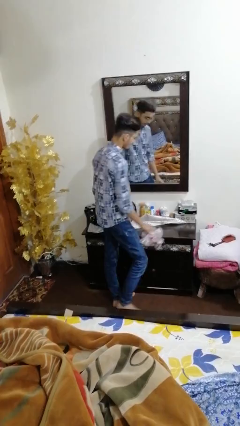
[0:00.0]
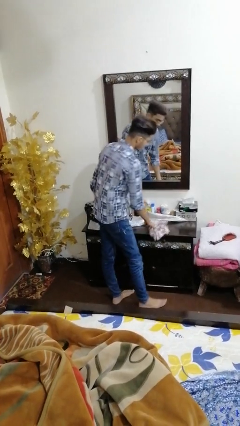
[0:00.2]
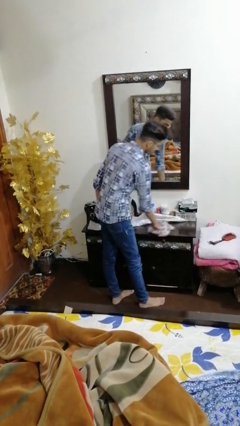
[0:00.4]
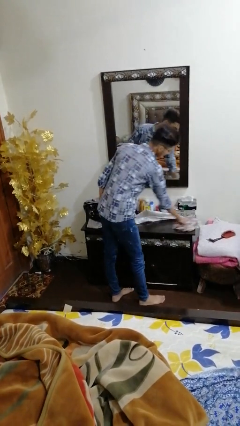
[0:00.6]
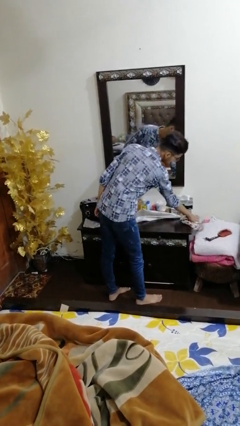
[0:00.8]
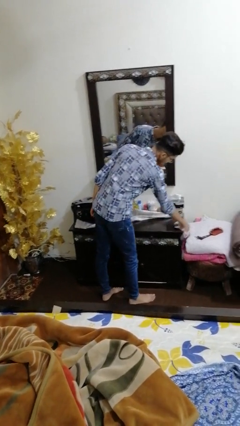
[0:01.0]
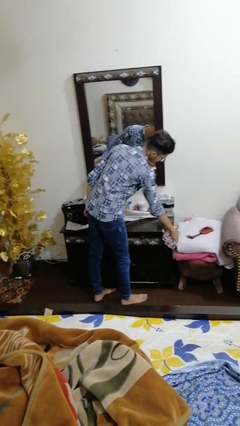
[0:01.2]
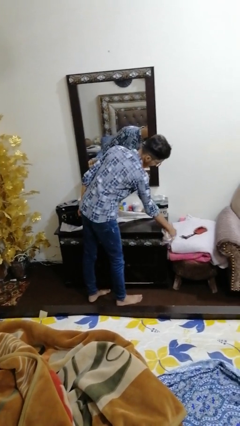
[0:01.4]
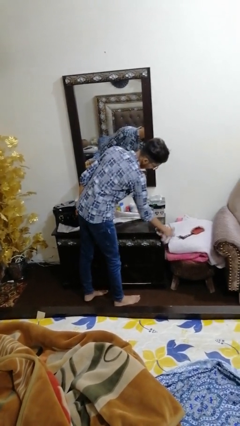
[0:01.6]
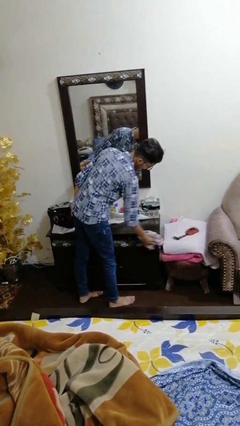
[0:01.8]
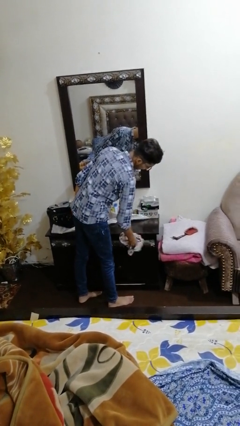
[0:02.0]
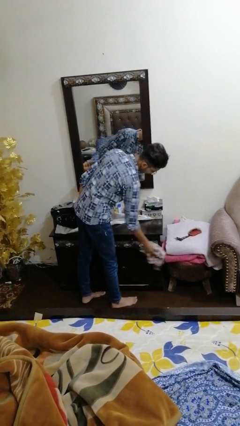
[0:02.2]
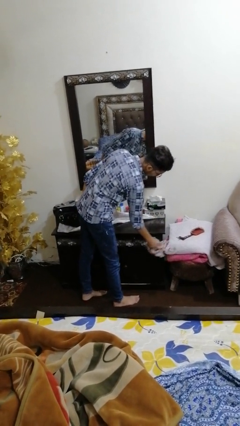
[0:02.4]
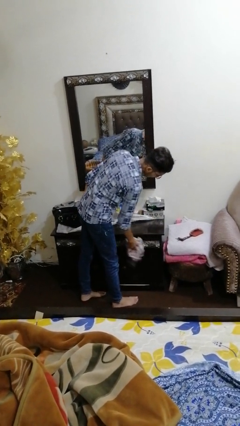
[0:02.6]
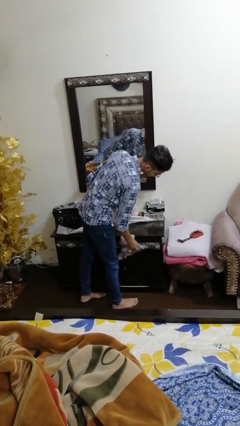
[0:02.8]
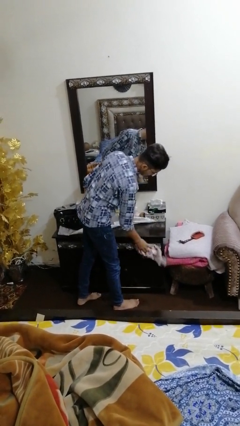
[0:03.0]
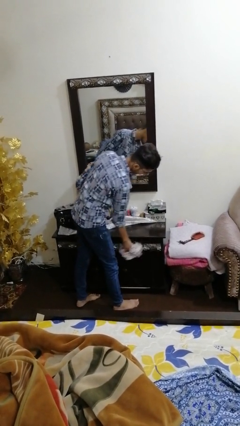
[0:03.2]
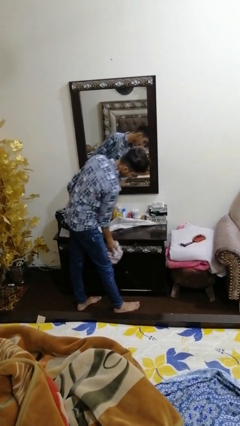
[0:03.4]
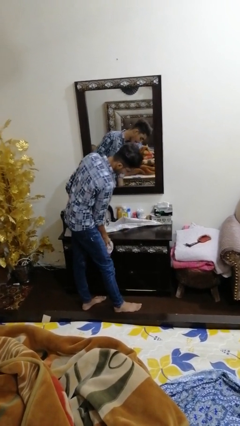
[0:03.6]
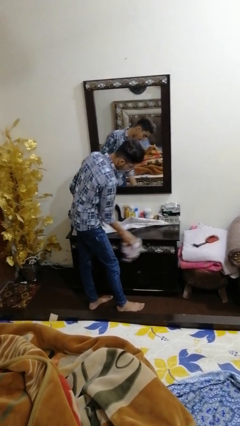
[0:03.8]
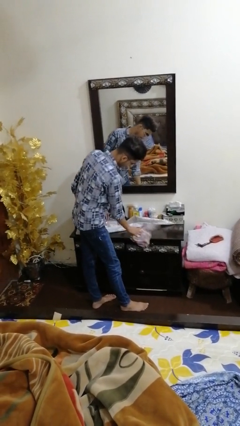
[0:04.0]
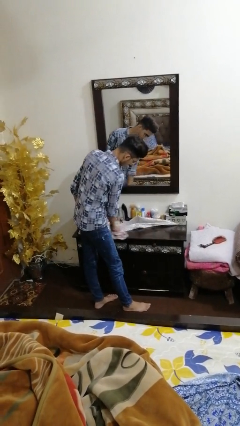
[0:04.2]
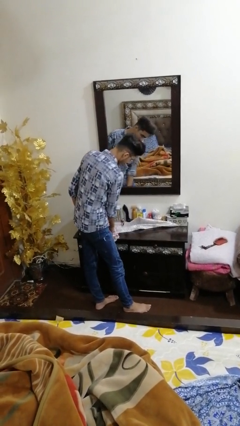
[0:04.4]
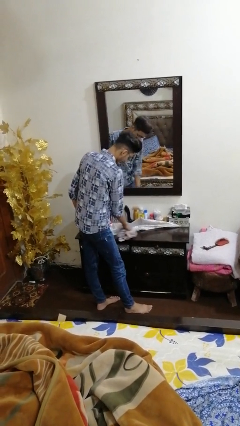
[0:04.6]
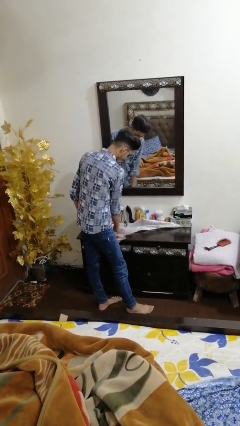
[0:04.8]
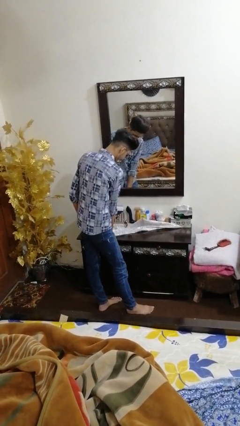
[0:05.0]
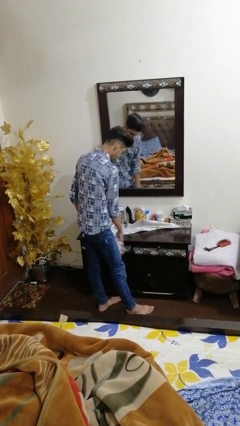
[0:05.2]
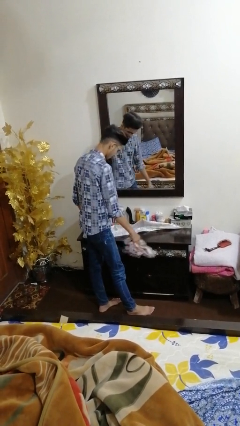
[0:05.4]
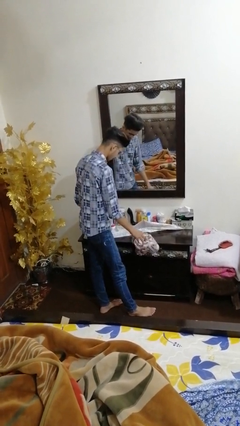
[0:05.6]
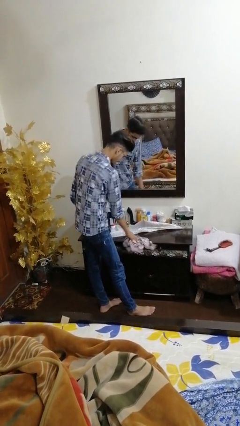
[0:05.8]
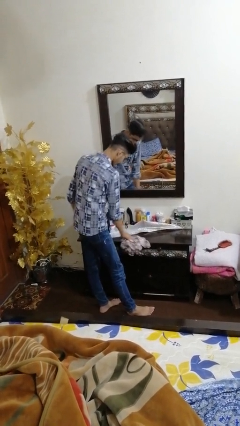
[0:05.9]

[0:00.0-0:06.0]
person cleans table with rag

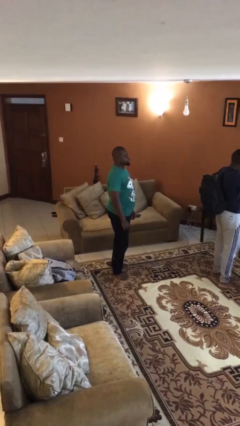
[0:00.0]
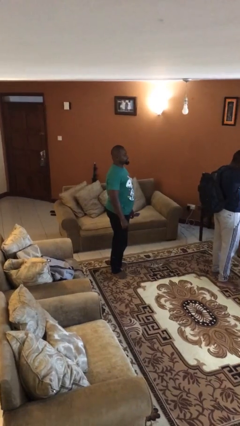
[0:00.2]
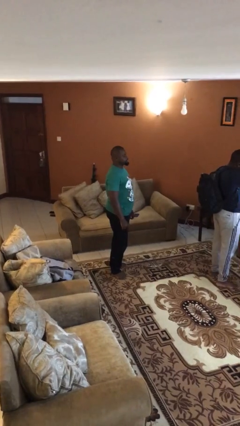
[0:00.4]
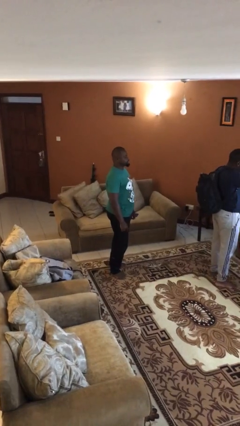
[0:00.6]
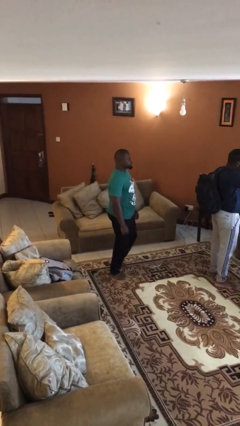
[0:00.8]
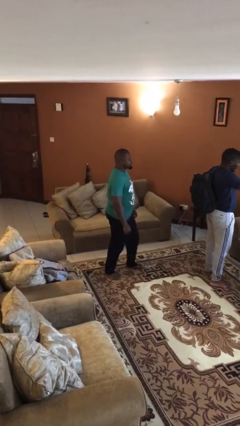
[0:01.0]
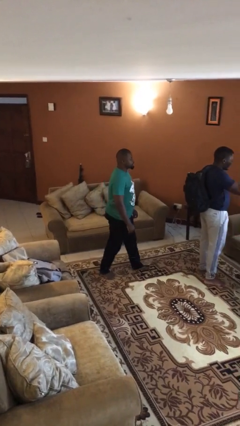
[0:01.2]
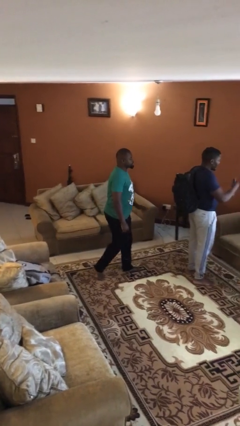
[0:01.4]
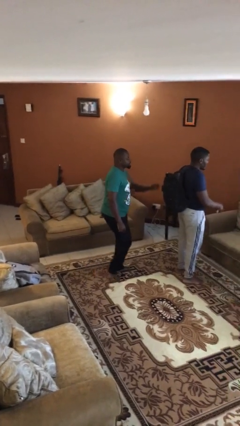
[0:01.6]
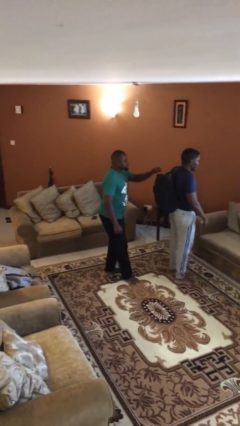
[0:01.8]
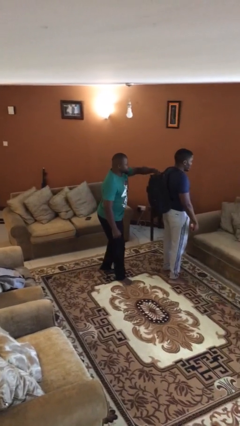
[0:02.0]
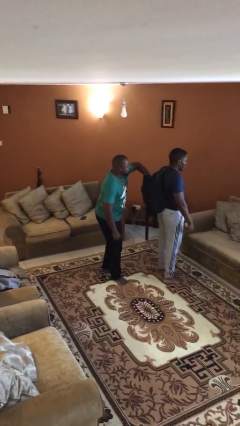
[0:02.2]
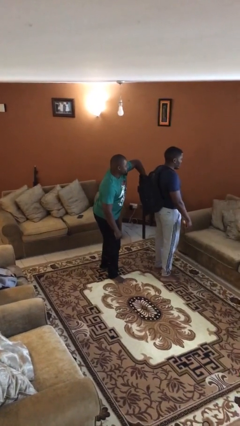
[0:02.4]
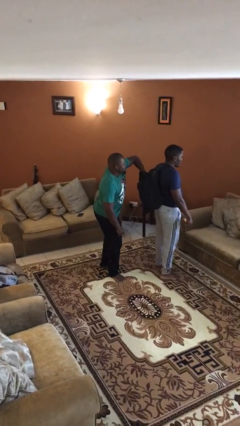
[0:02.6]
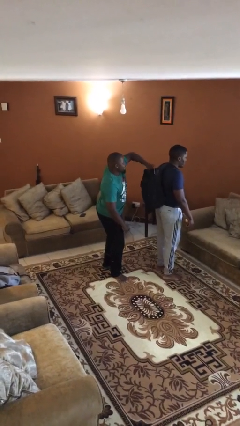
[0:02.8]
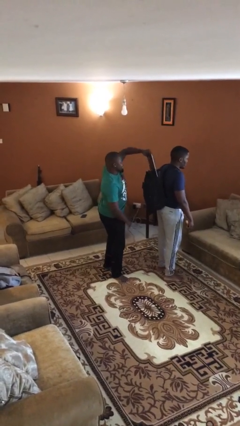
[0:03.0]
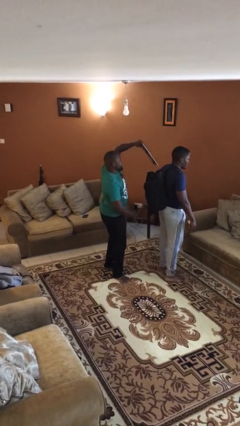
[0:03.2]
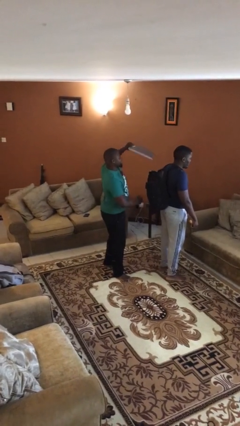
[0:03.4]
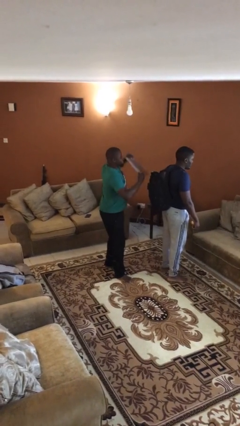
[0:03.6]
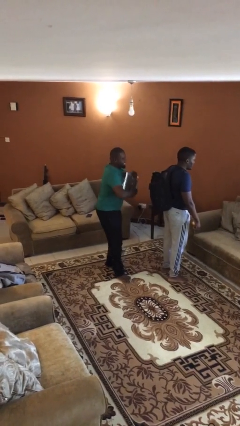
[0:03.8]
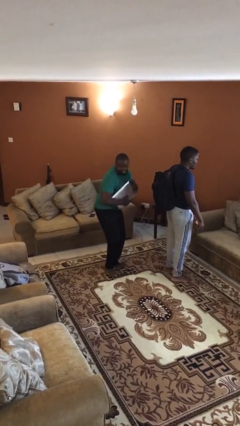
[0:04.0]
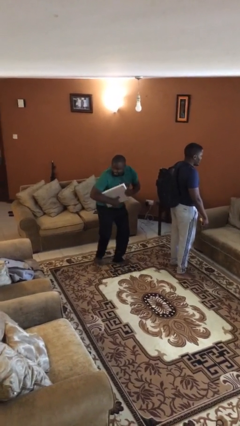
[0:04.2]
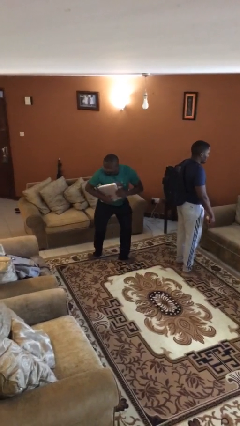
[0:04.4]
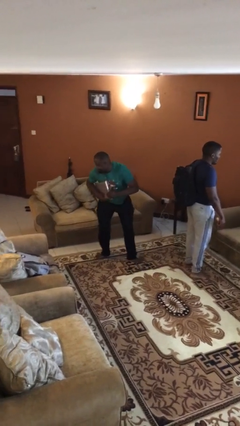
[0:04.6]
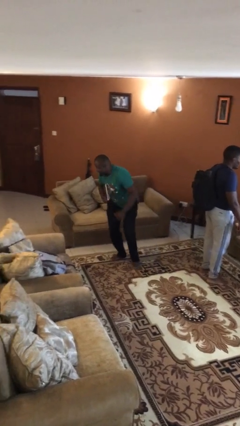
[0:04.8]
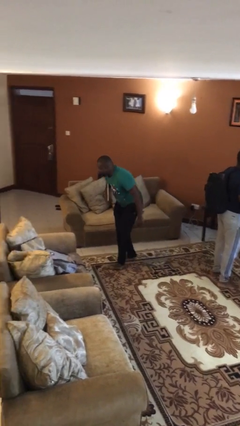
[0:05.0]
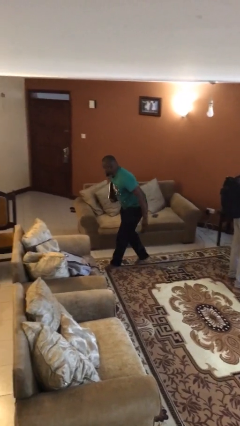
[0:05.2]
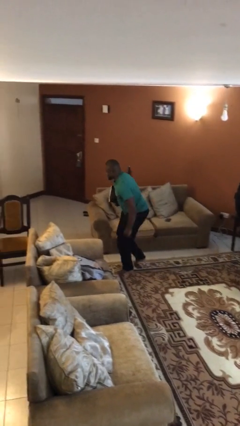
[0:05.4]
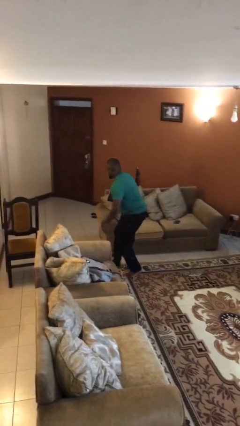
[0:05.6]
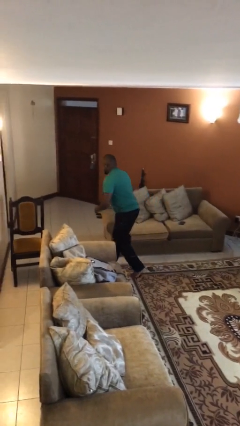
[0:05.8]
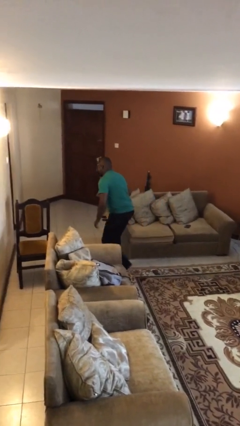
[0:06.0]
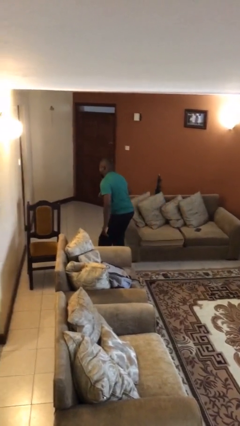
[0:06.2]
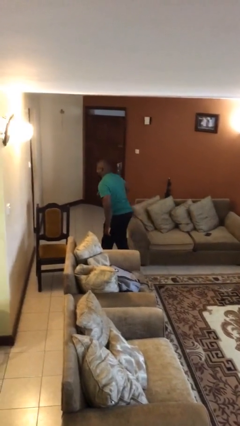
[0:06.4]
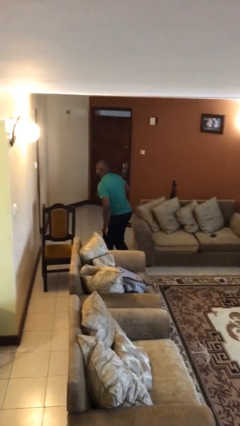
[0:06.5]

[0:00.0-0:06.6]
person steals object from person

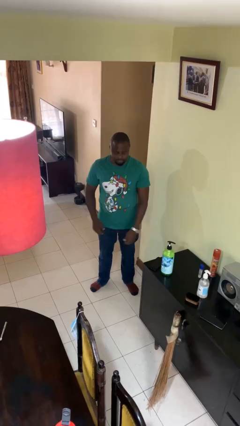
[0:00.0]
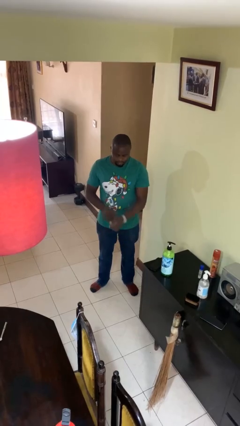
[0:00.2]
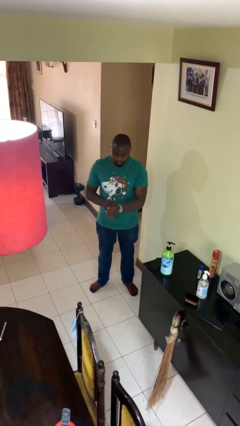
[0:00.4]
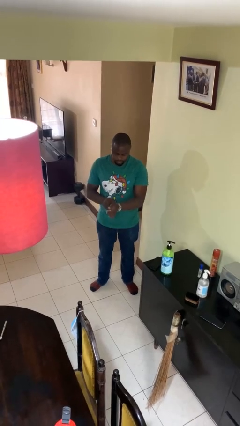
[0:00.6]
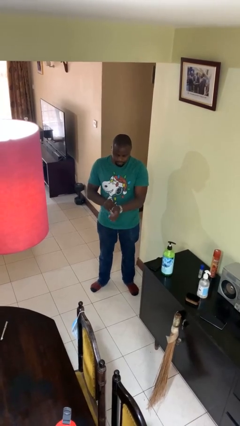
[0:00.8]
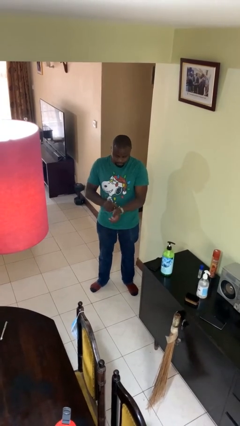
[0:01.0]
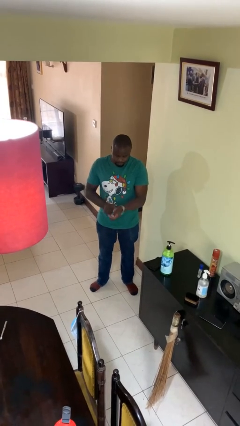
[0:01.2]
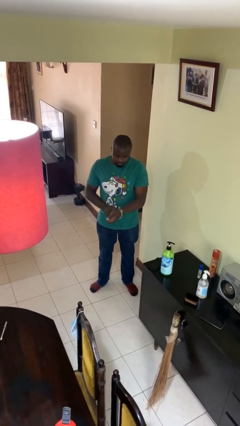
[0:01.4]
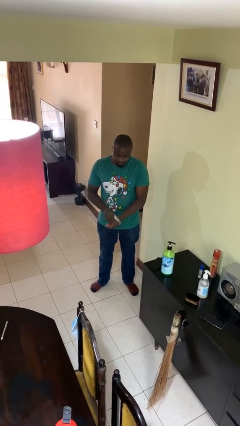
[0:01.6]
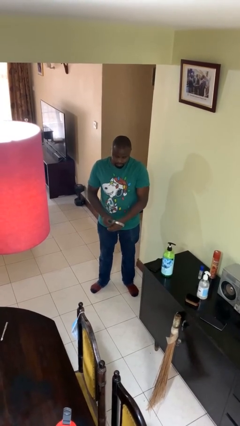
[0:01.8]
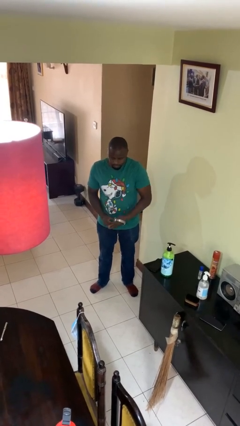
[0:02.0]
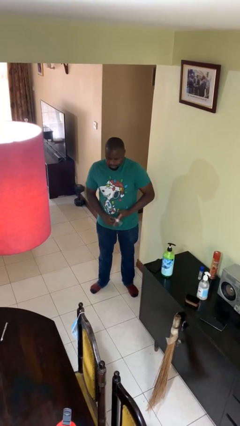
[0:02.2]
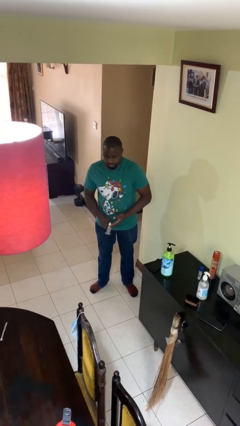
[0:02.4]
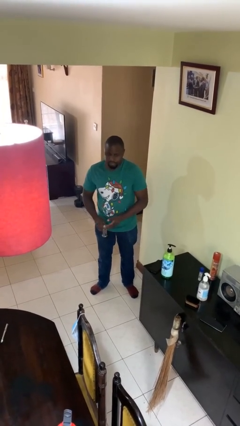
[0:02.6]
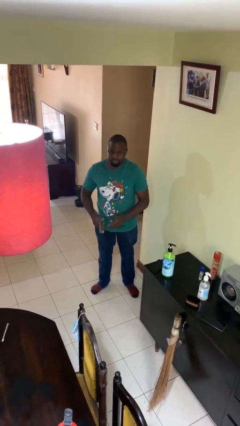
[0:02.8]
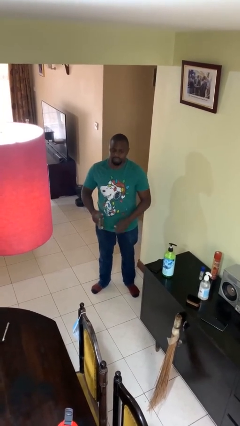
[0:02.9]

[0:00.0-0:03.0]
person takes off wristwatch

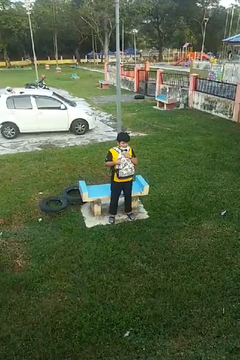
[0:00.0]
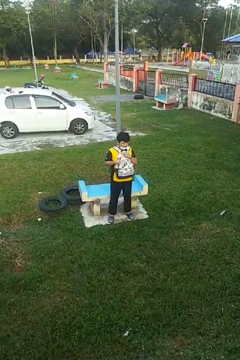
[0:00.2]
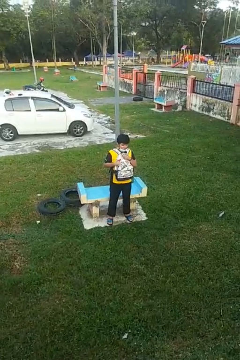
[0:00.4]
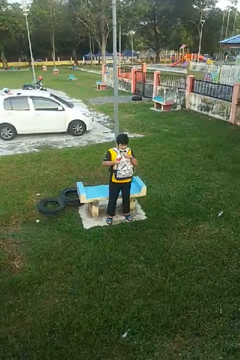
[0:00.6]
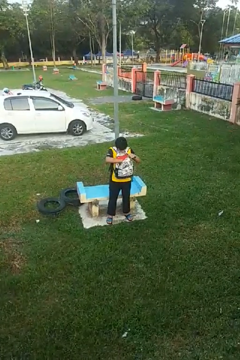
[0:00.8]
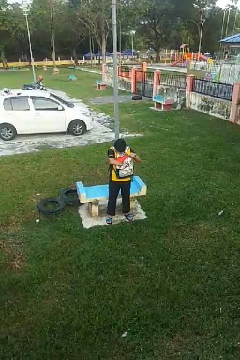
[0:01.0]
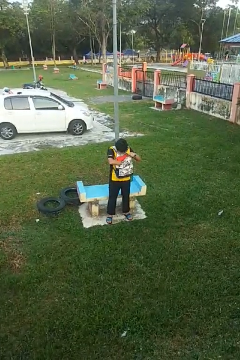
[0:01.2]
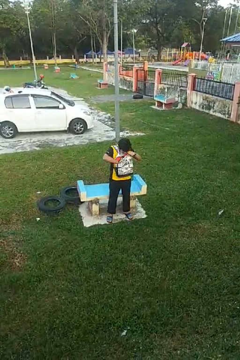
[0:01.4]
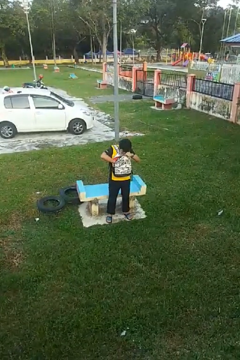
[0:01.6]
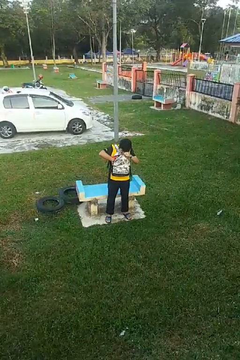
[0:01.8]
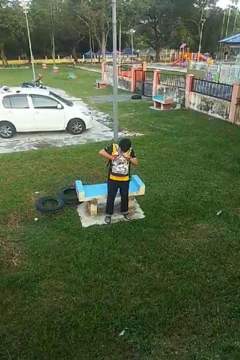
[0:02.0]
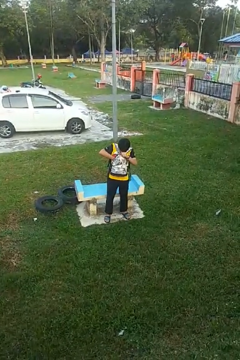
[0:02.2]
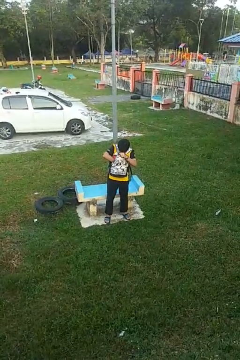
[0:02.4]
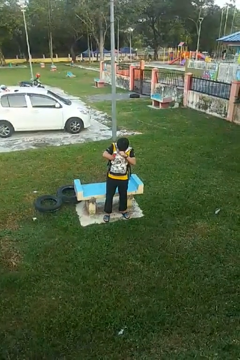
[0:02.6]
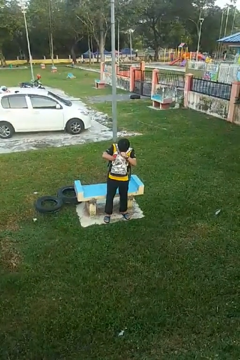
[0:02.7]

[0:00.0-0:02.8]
person searches in backpack
